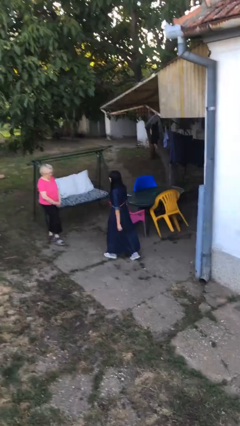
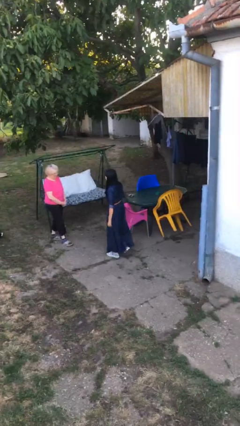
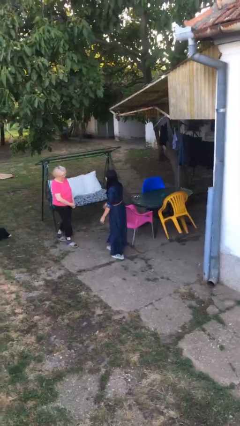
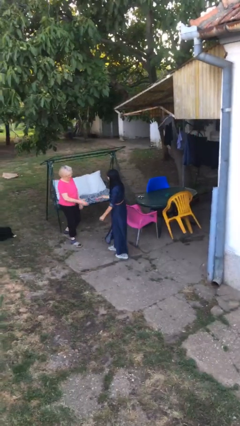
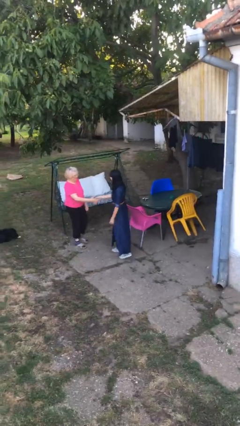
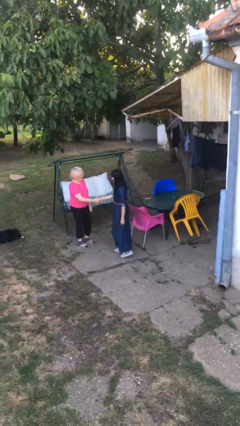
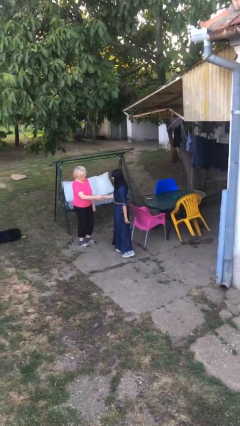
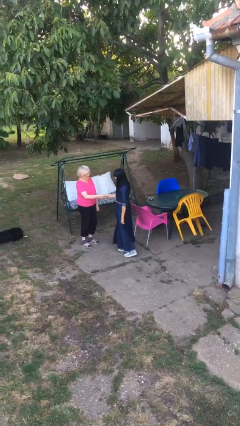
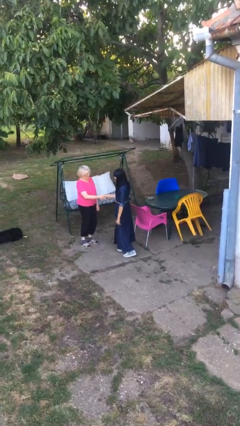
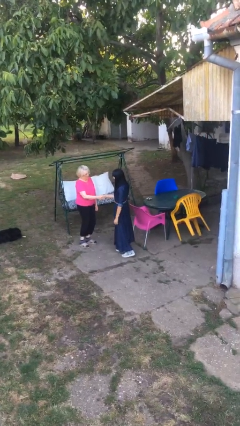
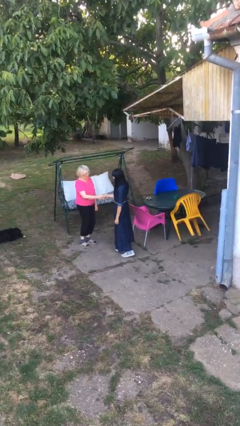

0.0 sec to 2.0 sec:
person shakes hand

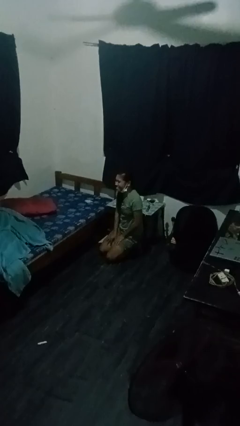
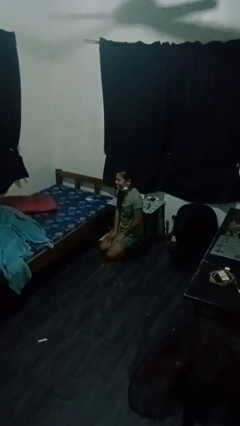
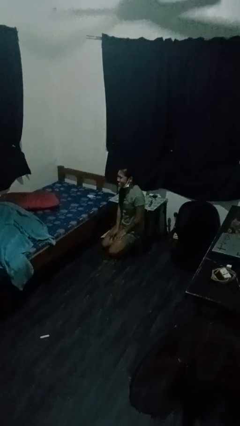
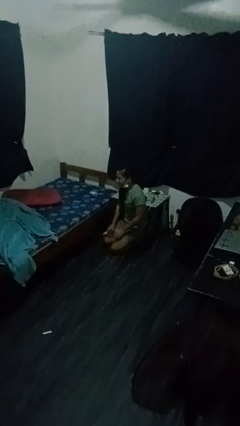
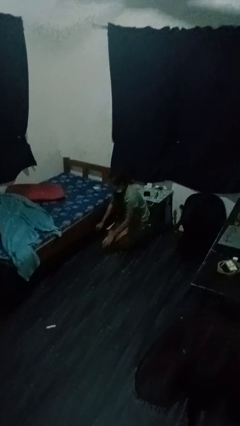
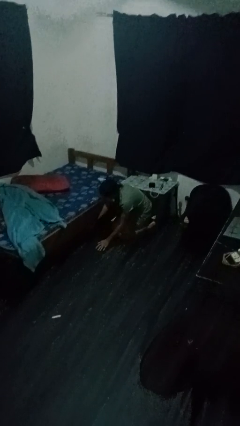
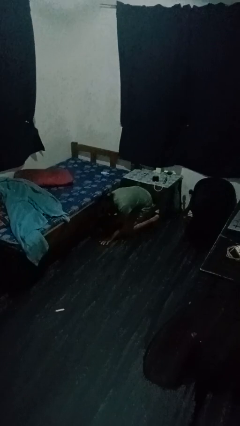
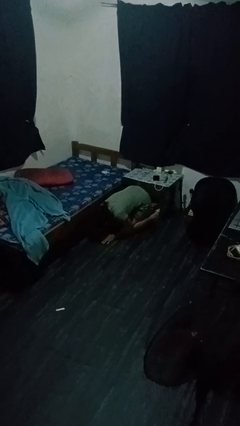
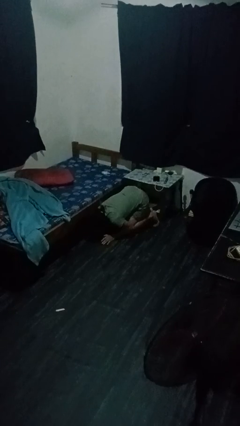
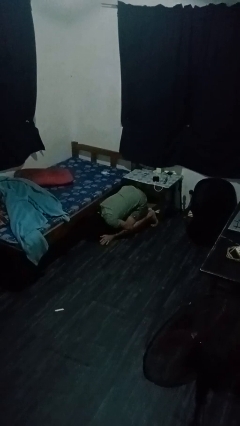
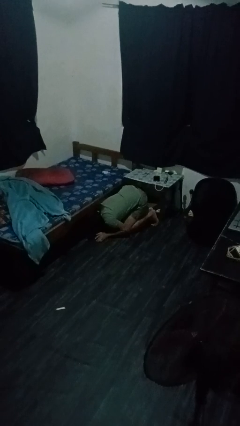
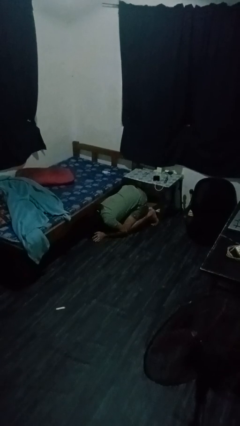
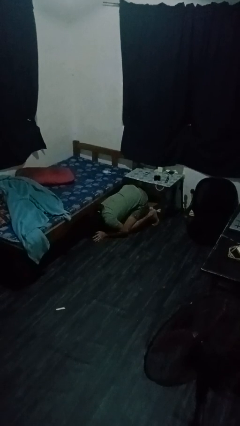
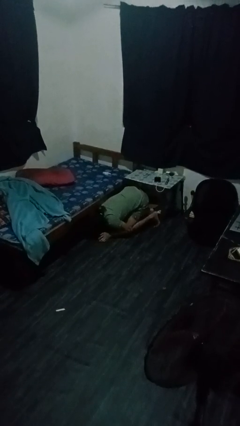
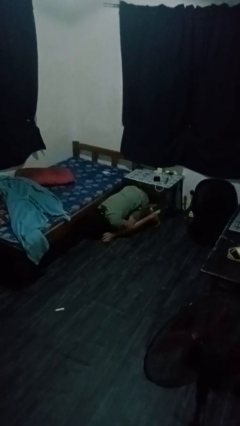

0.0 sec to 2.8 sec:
person searches under bed

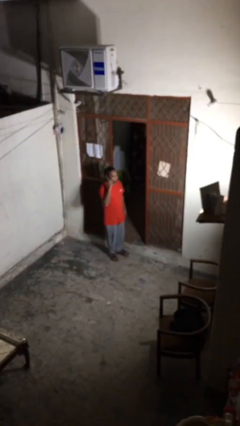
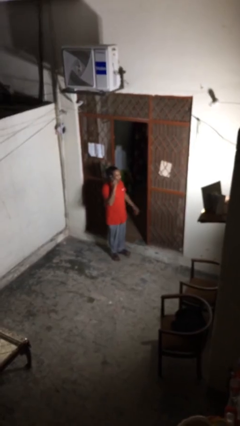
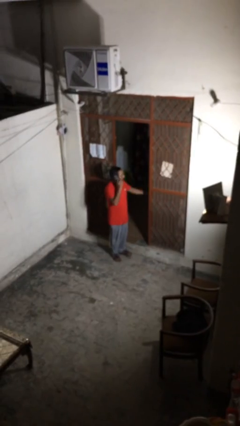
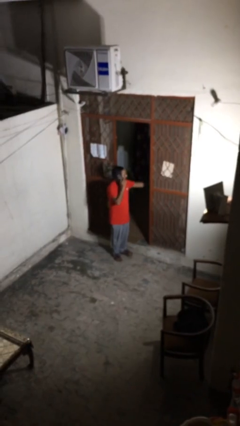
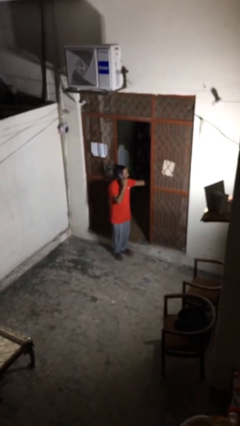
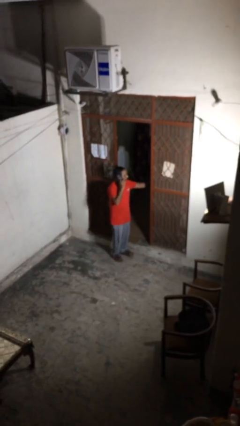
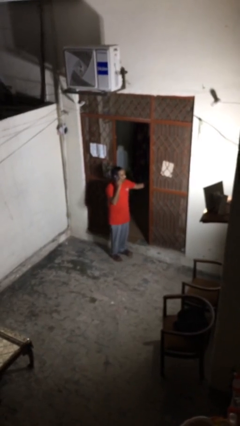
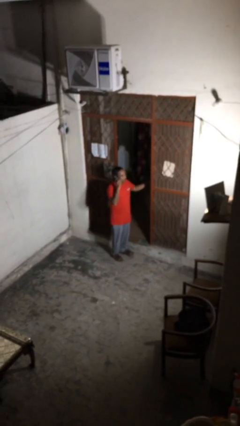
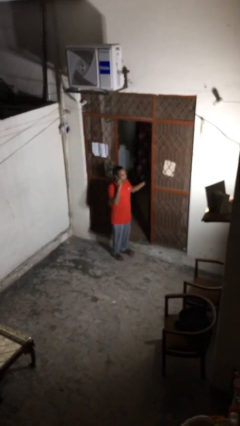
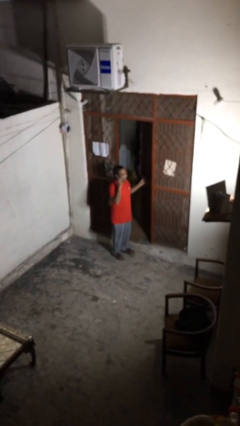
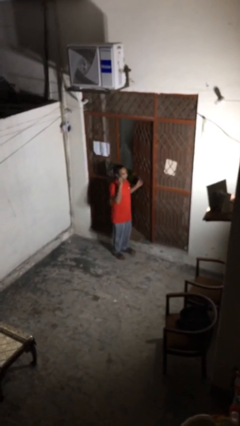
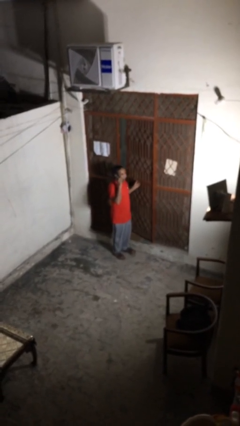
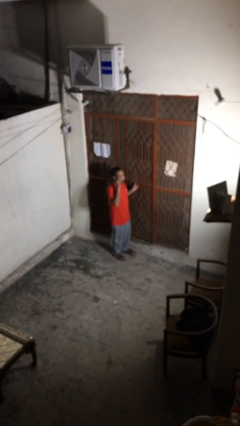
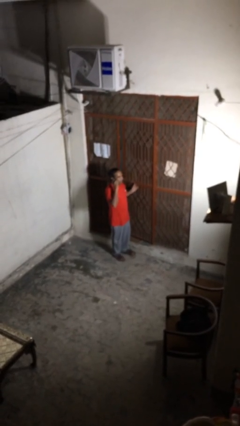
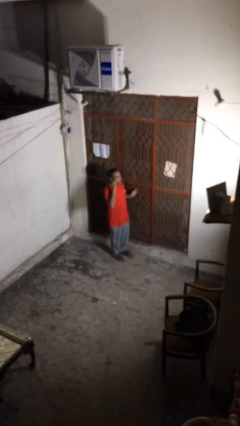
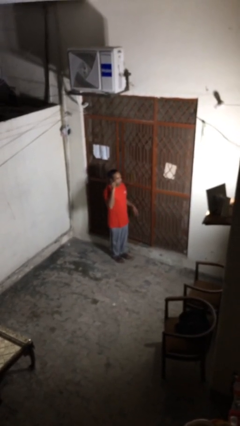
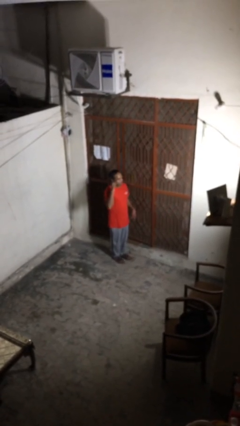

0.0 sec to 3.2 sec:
person closes facility door

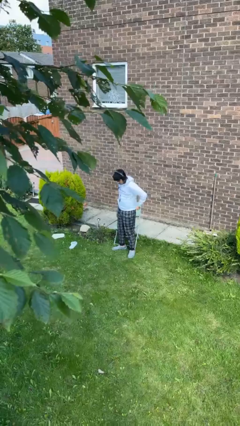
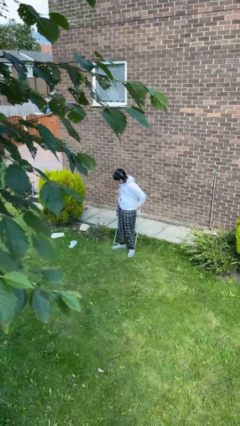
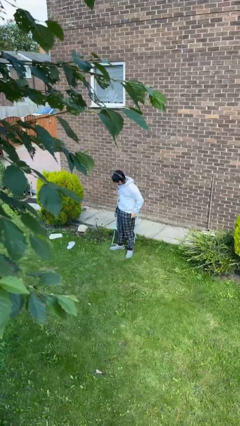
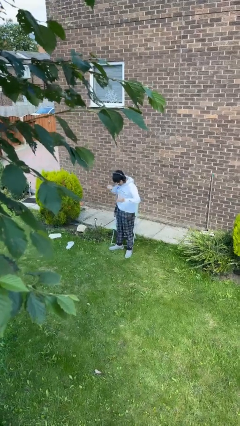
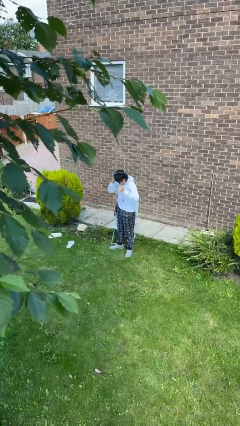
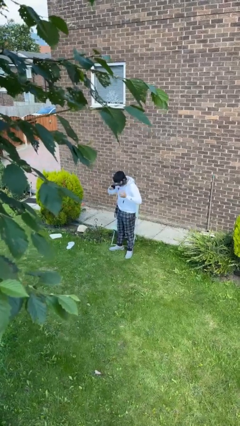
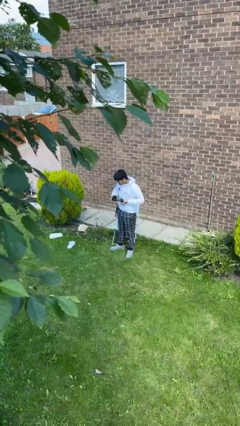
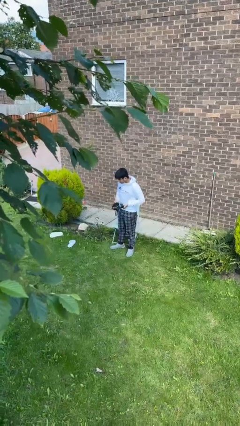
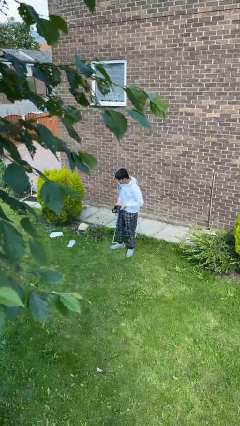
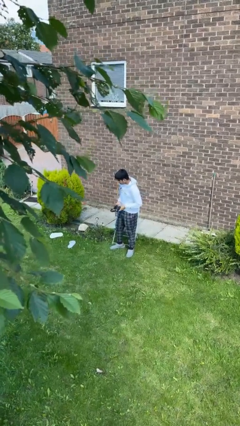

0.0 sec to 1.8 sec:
person takes off headphones

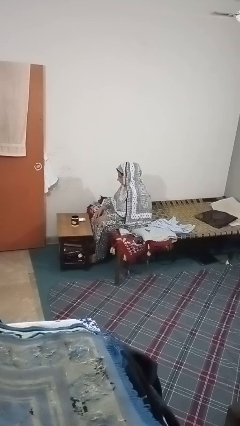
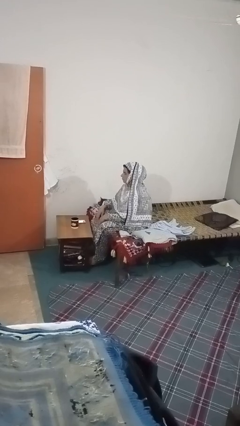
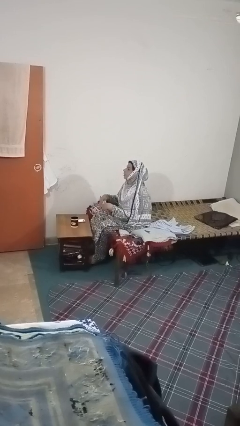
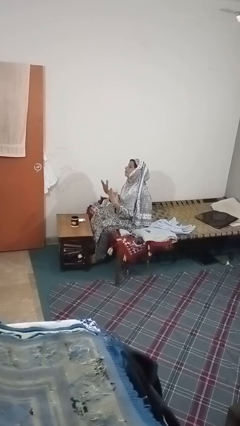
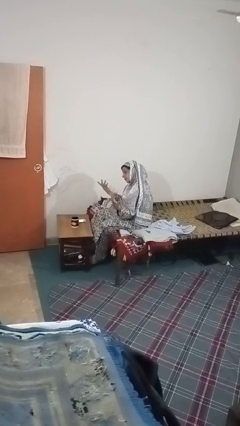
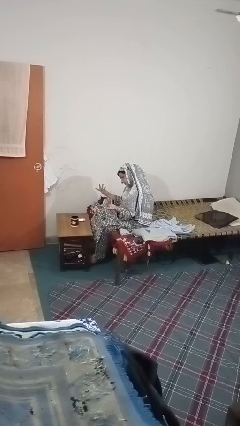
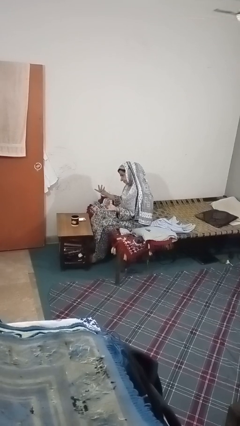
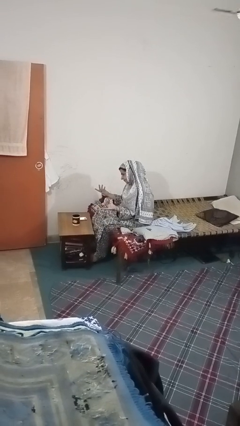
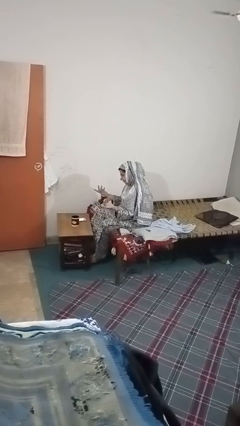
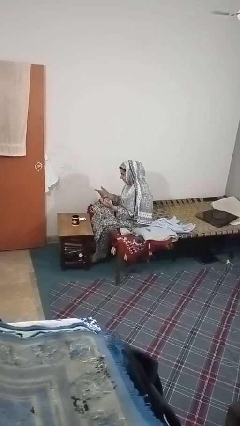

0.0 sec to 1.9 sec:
person shrugs

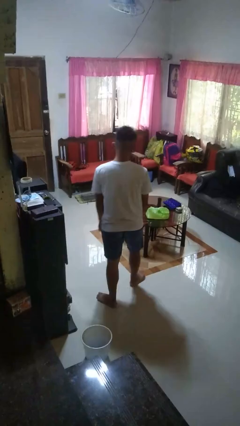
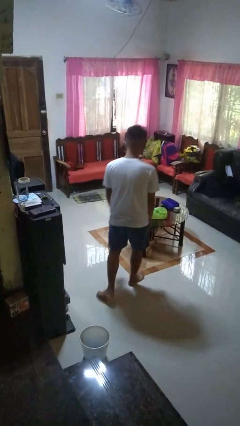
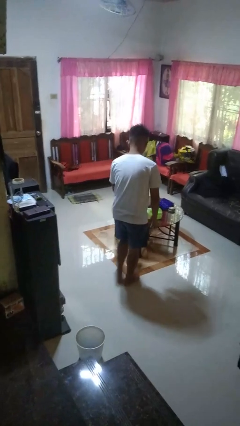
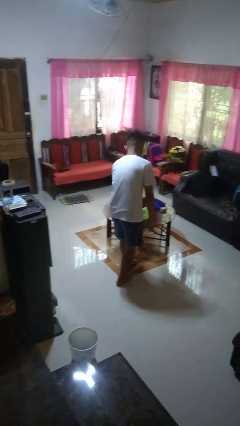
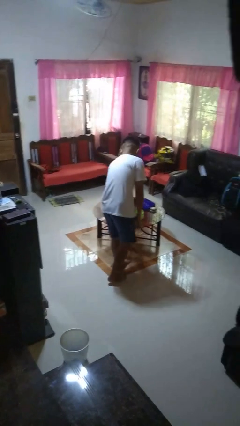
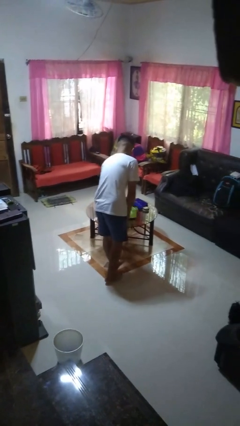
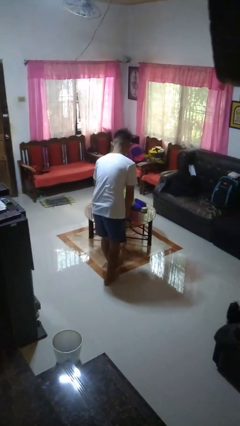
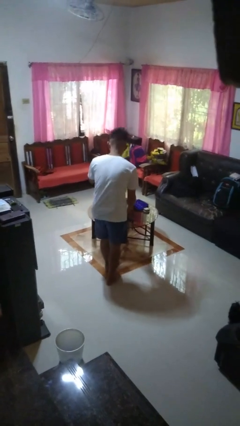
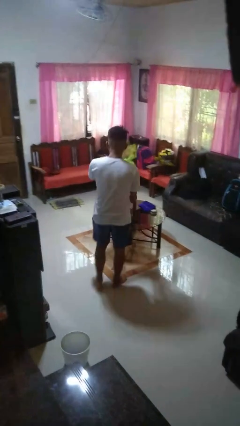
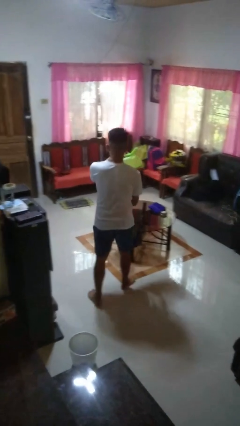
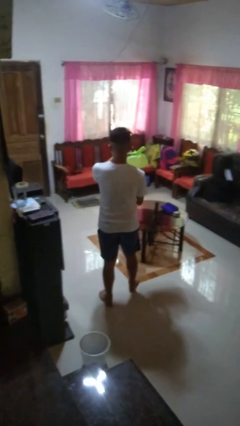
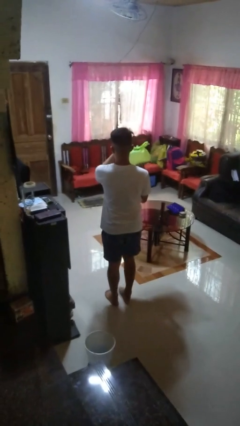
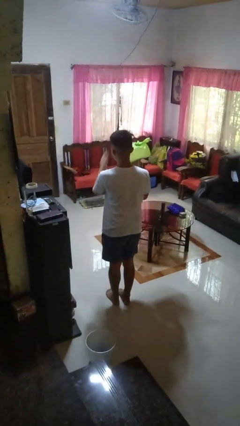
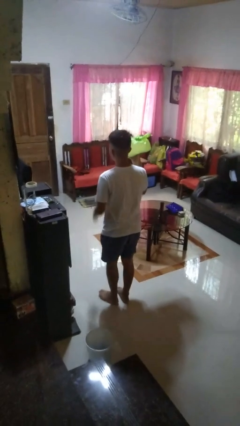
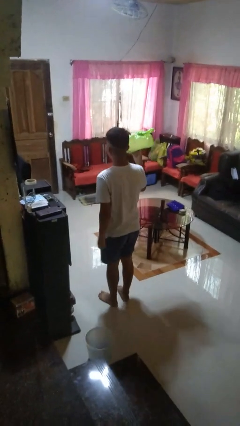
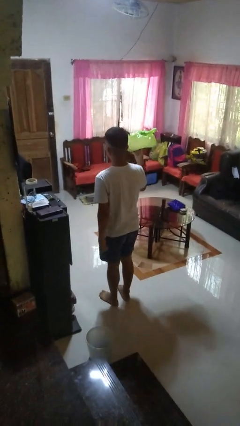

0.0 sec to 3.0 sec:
person picks up object from table

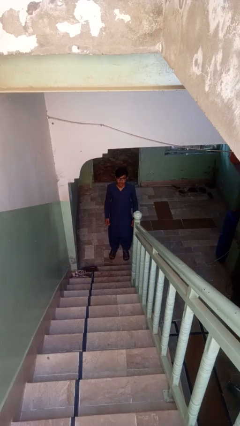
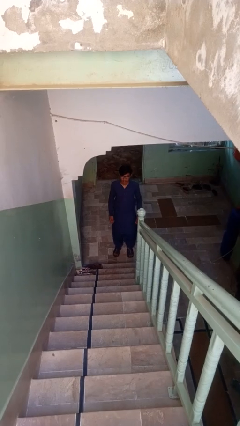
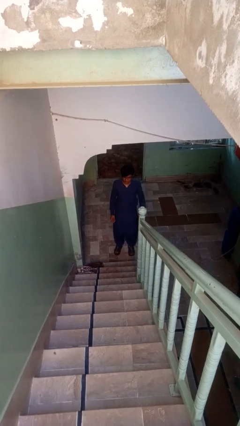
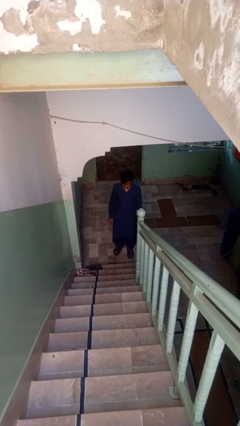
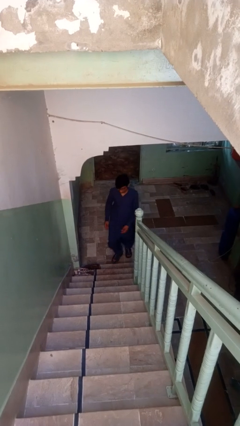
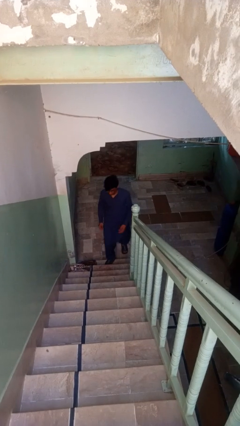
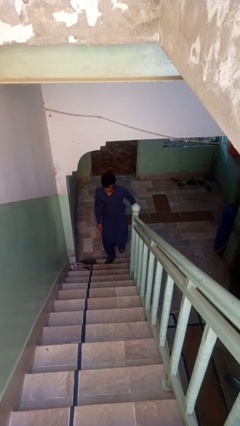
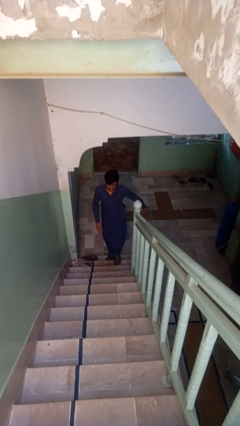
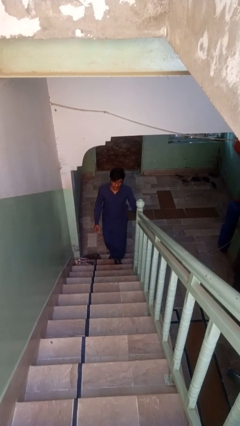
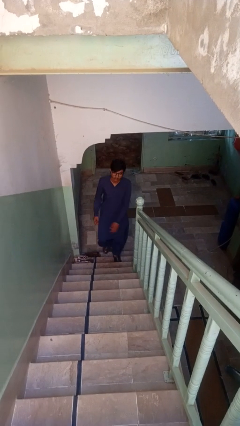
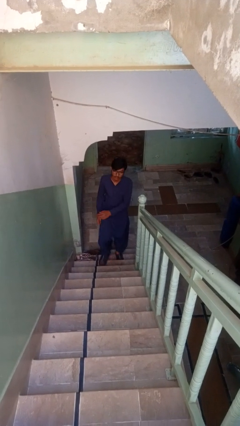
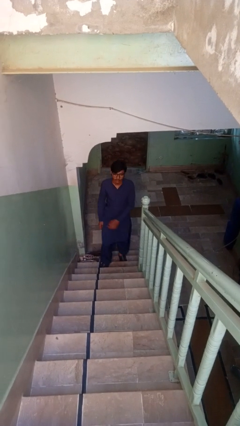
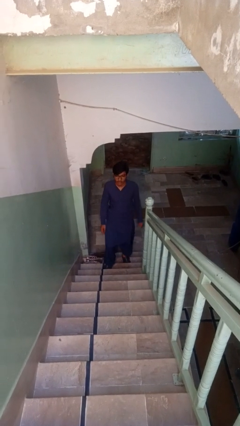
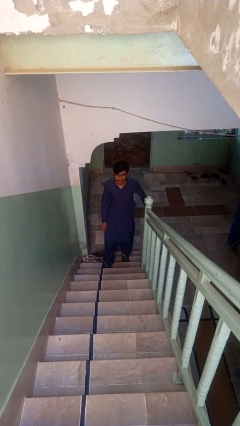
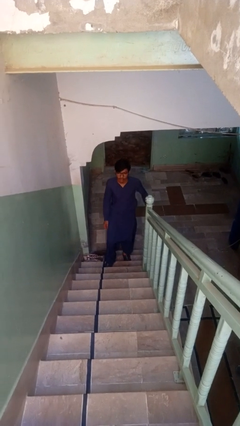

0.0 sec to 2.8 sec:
person climbs up stairs
